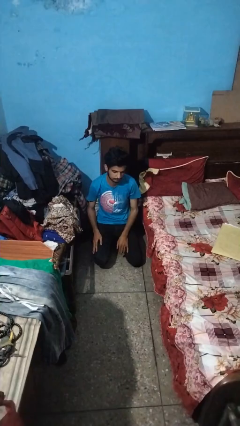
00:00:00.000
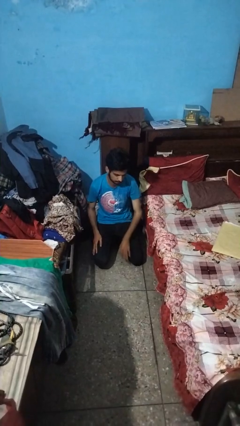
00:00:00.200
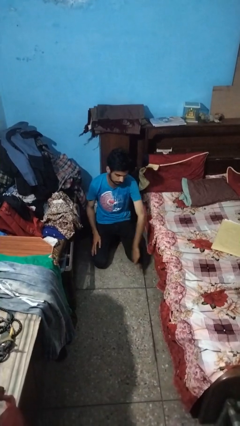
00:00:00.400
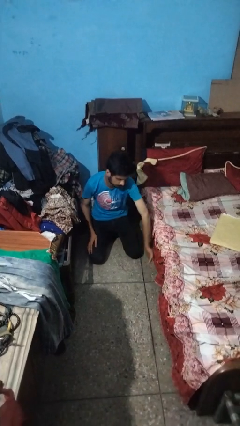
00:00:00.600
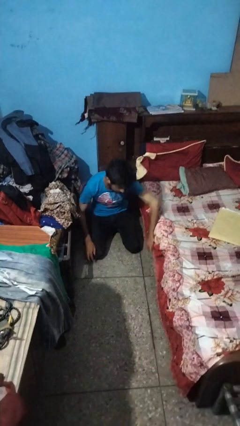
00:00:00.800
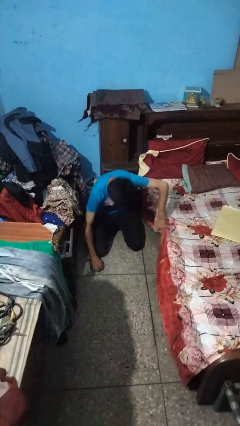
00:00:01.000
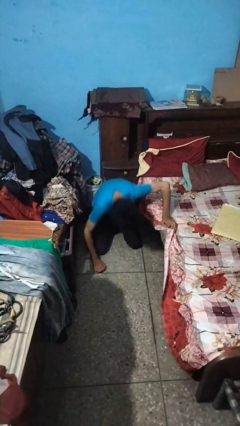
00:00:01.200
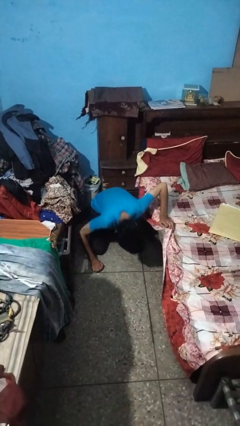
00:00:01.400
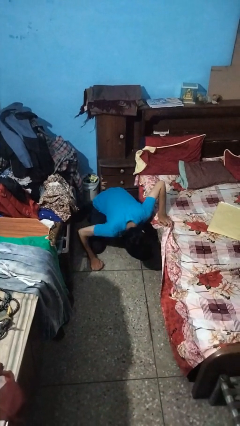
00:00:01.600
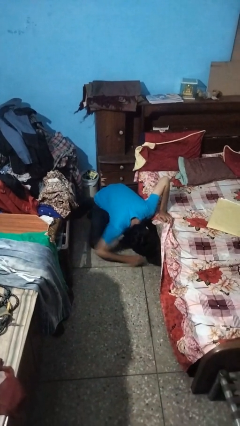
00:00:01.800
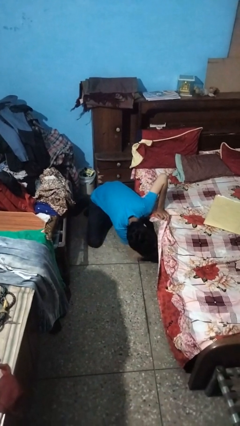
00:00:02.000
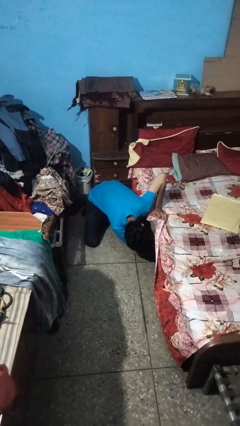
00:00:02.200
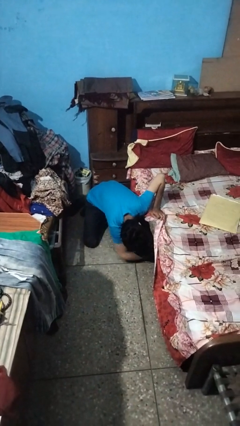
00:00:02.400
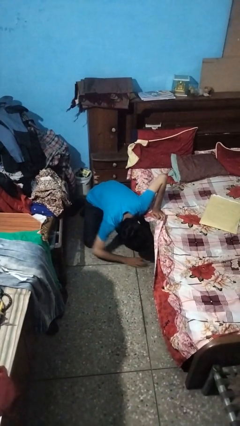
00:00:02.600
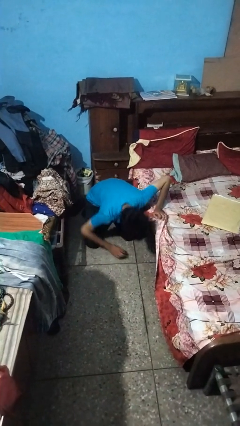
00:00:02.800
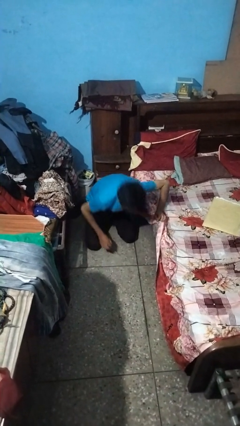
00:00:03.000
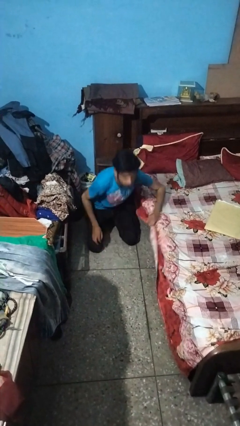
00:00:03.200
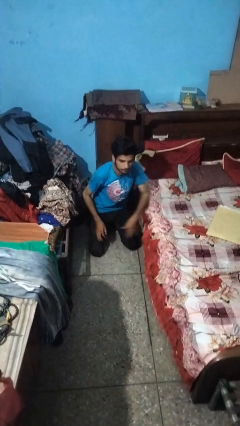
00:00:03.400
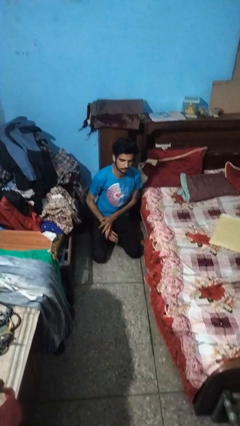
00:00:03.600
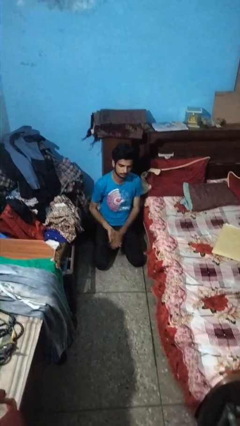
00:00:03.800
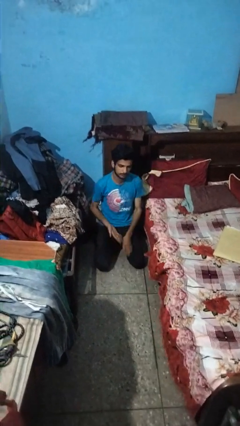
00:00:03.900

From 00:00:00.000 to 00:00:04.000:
person searches under bed

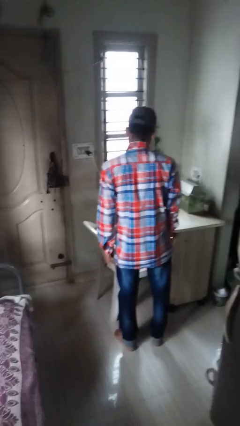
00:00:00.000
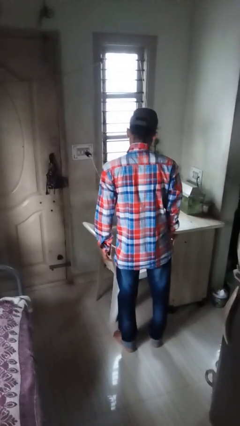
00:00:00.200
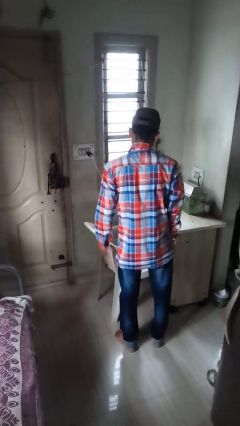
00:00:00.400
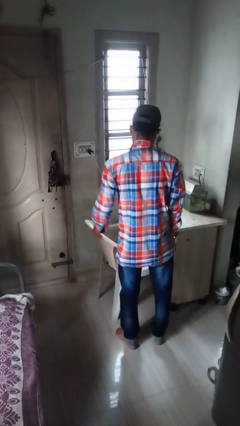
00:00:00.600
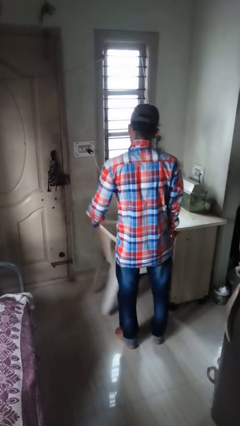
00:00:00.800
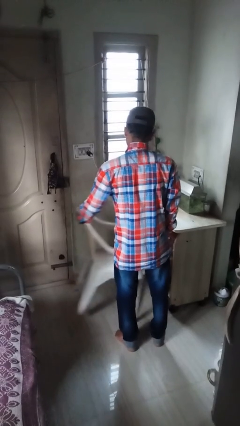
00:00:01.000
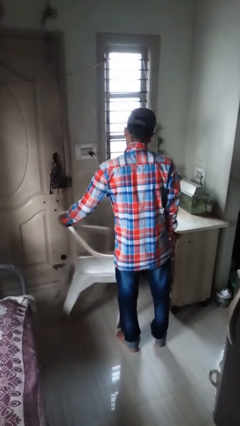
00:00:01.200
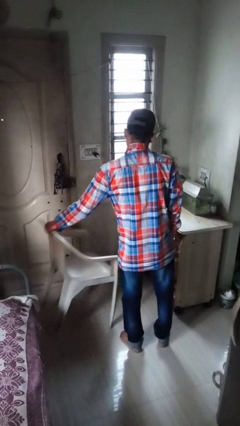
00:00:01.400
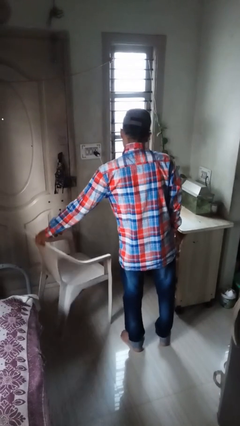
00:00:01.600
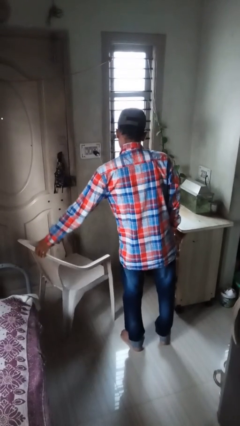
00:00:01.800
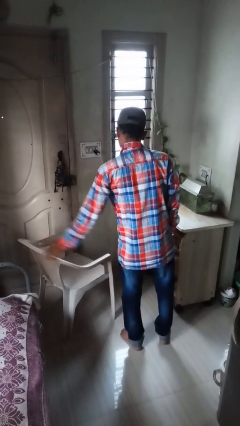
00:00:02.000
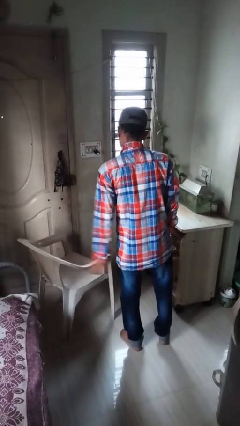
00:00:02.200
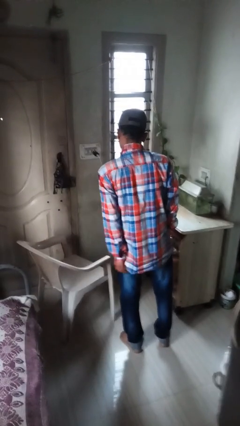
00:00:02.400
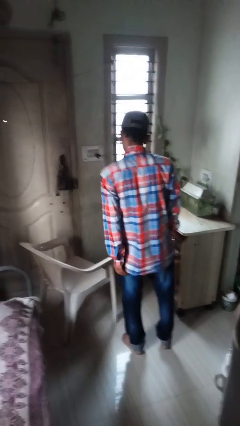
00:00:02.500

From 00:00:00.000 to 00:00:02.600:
person pulls out chair

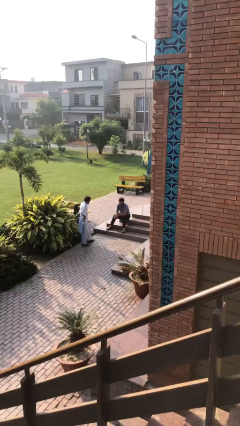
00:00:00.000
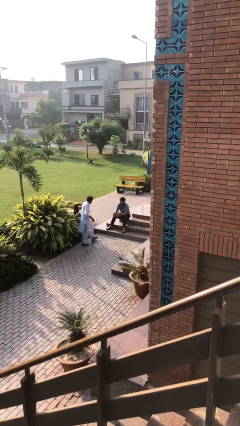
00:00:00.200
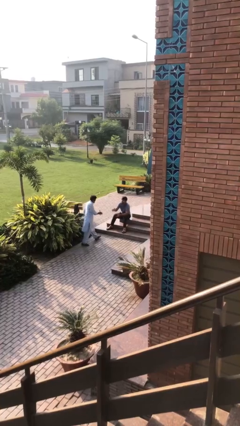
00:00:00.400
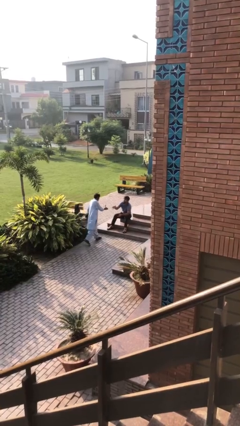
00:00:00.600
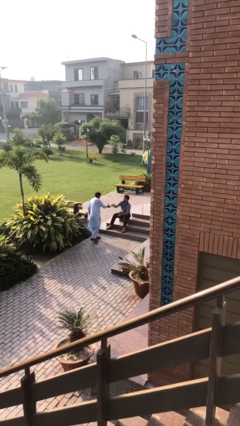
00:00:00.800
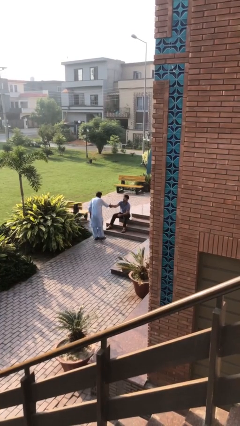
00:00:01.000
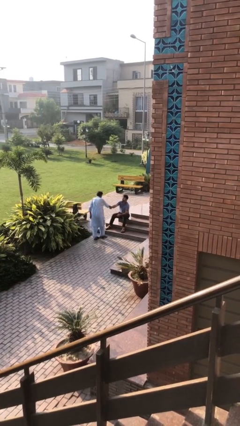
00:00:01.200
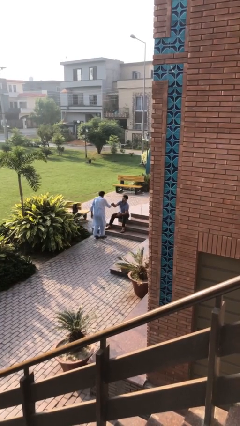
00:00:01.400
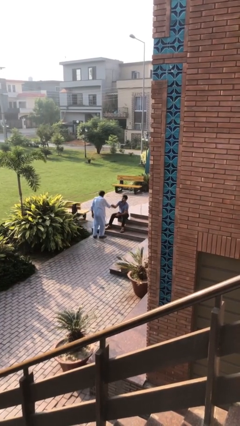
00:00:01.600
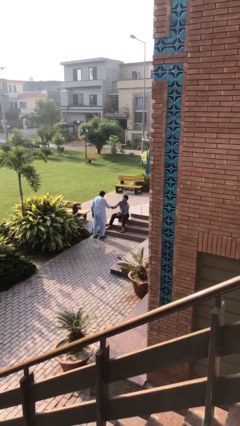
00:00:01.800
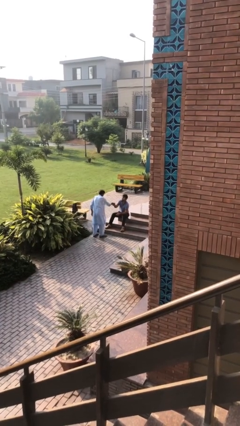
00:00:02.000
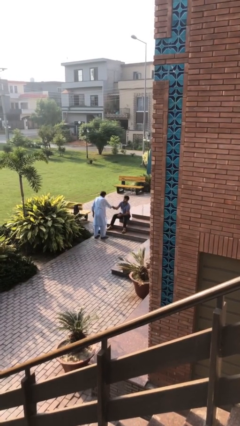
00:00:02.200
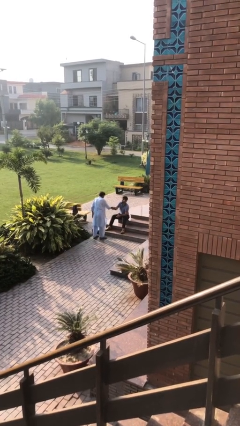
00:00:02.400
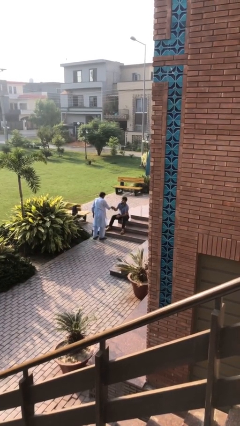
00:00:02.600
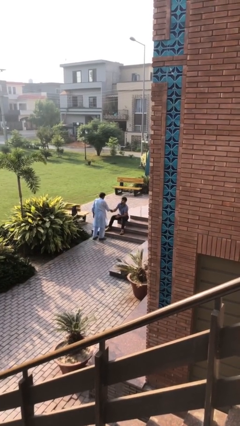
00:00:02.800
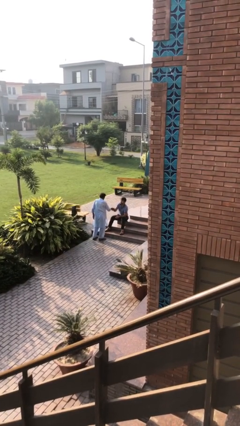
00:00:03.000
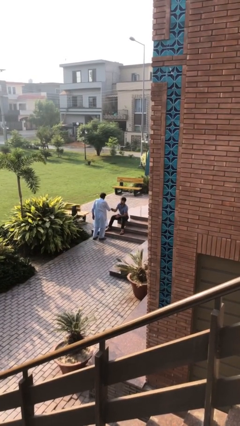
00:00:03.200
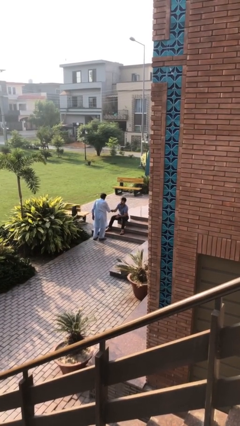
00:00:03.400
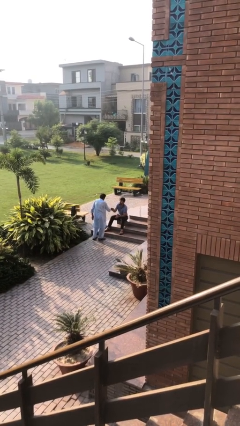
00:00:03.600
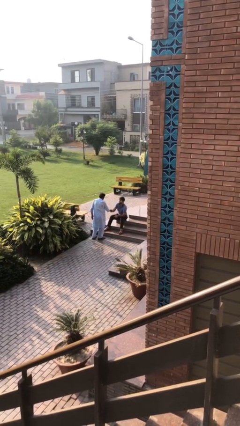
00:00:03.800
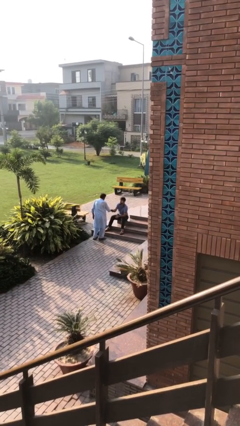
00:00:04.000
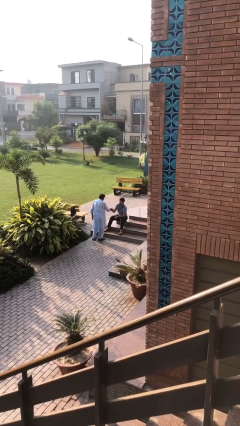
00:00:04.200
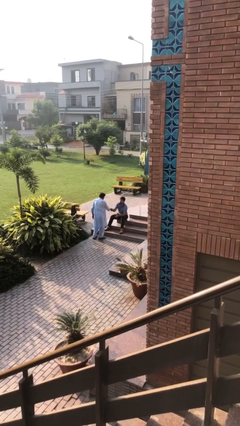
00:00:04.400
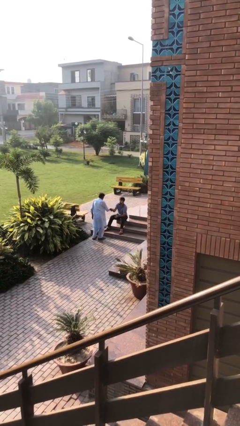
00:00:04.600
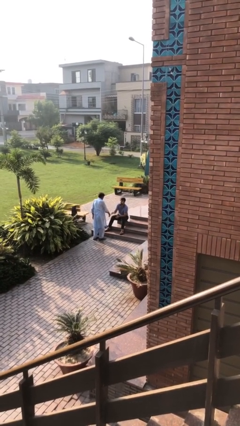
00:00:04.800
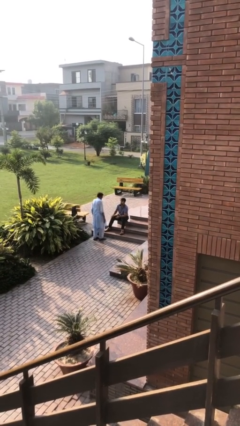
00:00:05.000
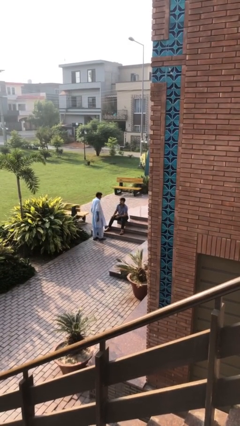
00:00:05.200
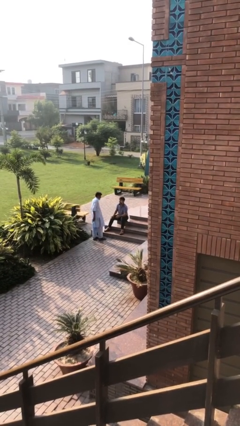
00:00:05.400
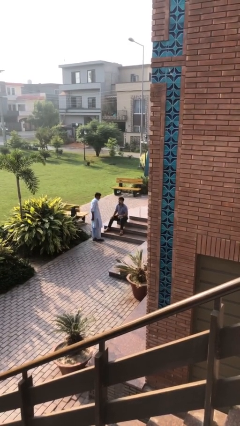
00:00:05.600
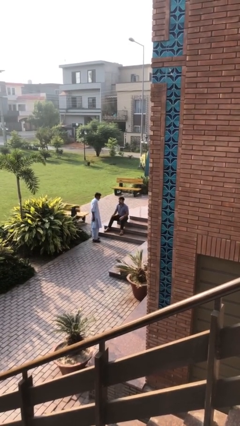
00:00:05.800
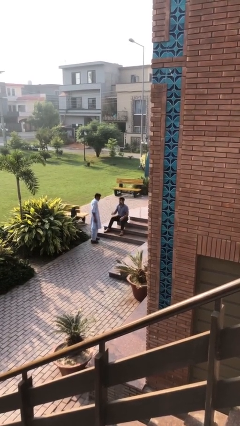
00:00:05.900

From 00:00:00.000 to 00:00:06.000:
person shakes hand

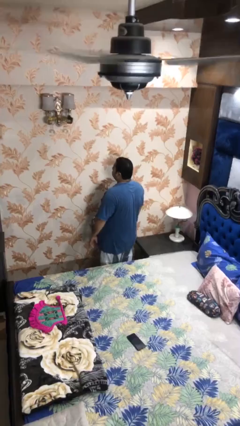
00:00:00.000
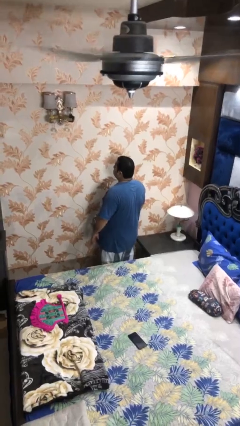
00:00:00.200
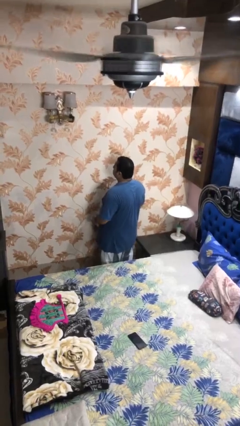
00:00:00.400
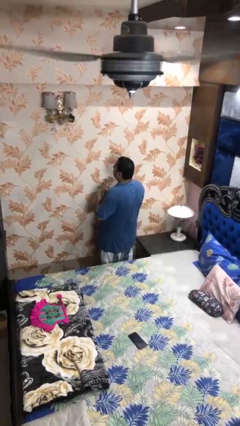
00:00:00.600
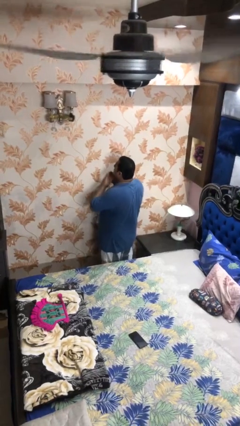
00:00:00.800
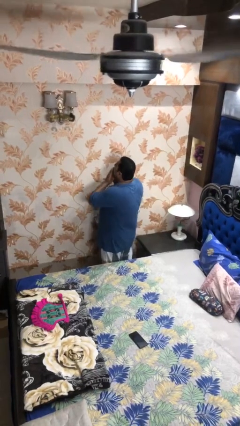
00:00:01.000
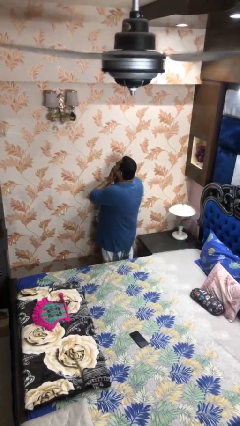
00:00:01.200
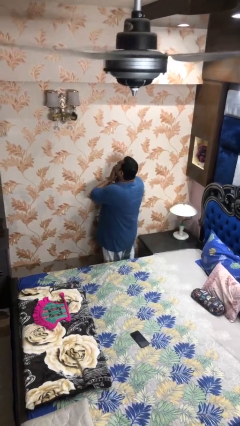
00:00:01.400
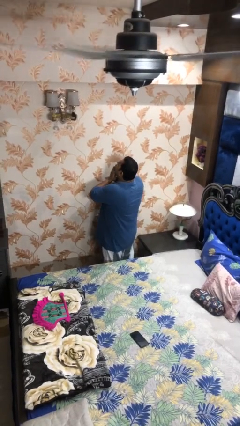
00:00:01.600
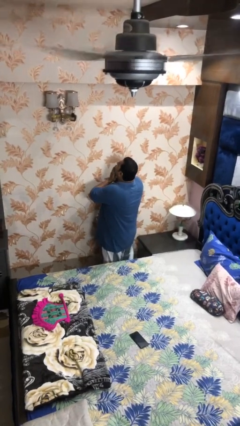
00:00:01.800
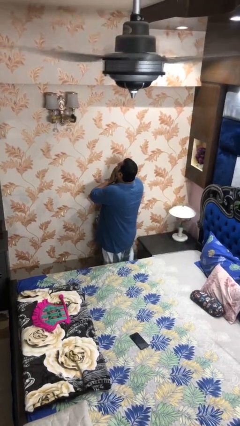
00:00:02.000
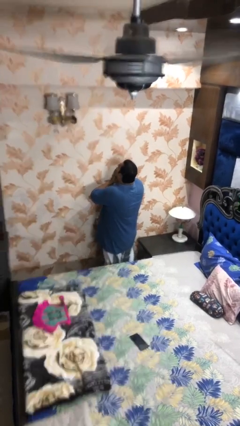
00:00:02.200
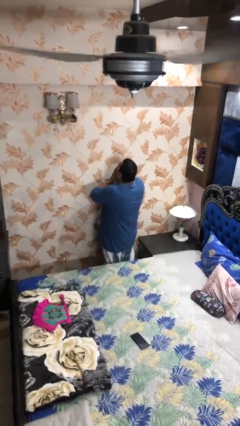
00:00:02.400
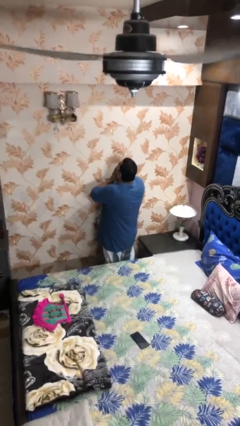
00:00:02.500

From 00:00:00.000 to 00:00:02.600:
person yawns

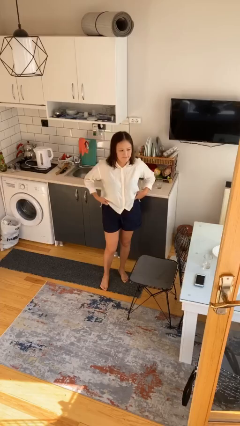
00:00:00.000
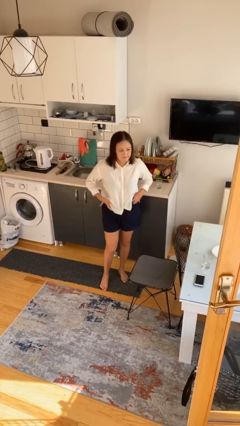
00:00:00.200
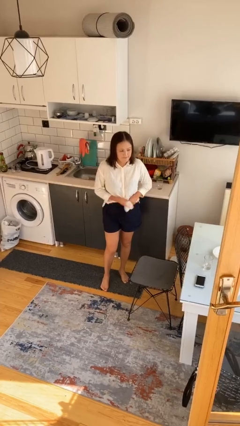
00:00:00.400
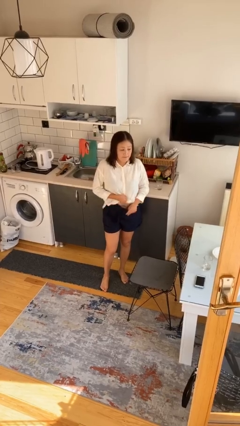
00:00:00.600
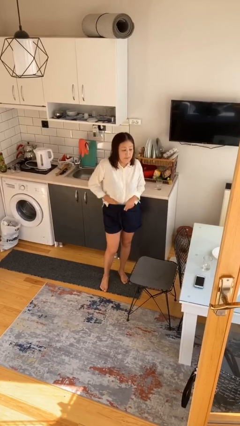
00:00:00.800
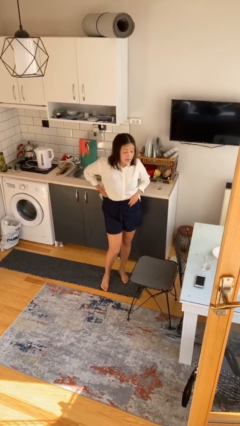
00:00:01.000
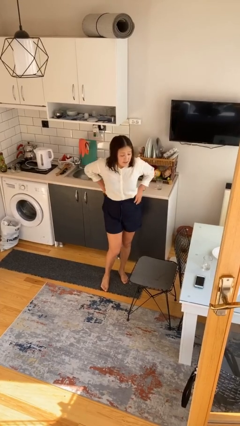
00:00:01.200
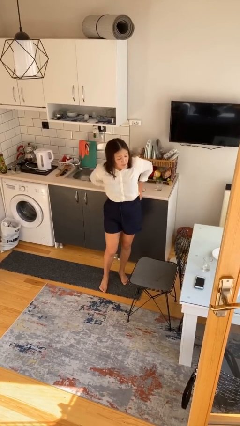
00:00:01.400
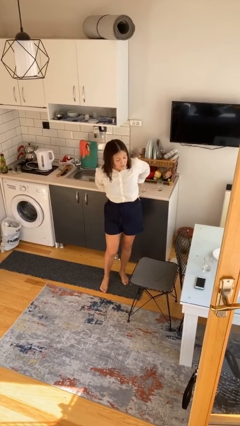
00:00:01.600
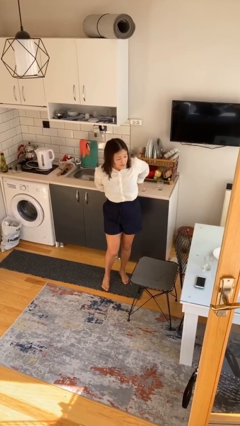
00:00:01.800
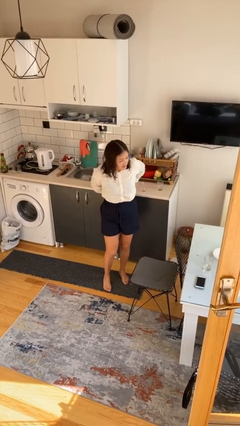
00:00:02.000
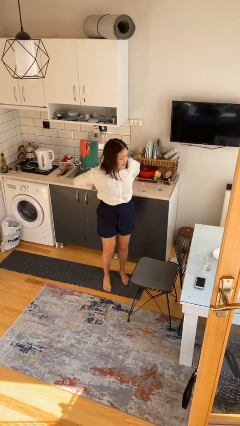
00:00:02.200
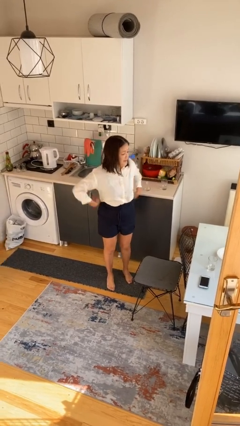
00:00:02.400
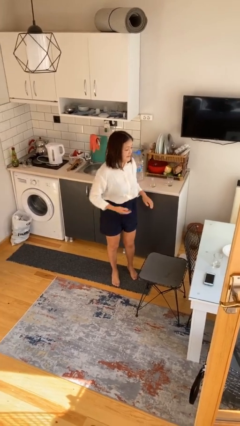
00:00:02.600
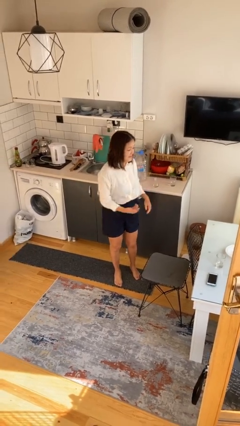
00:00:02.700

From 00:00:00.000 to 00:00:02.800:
person tucks in shirt
